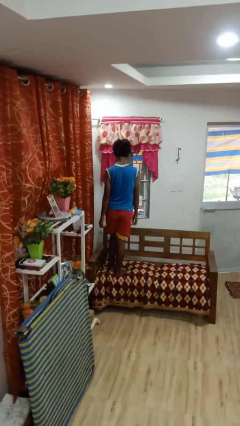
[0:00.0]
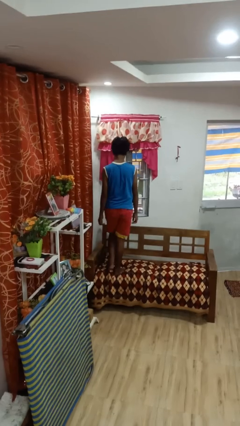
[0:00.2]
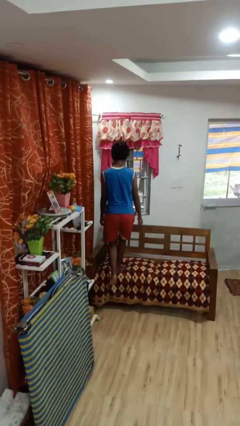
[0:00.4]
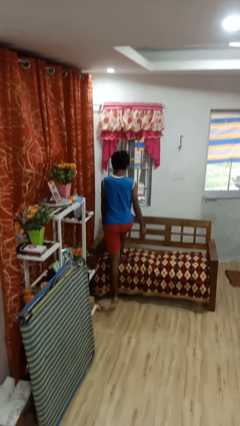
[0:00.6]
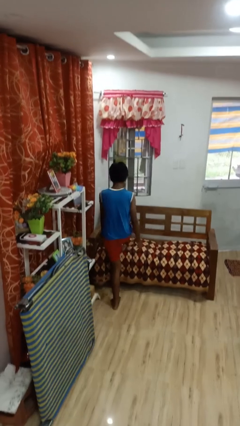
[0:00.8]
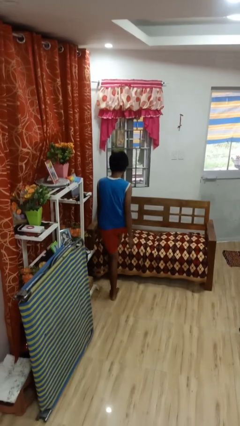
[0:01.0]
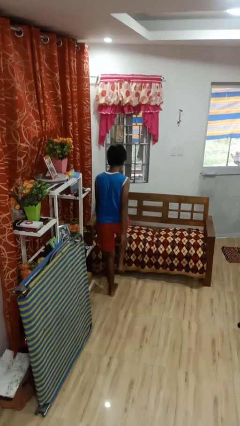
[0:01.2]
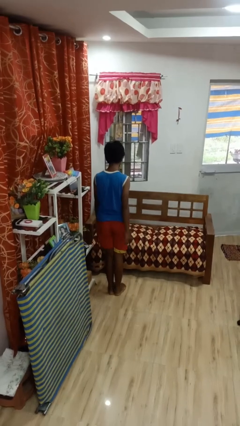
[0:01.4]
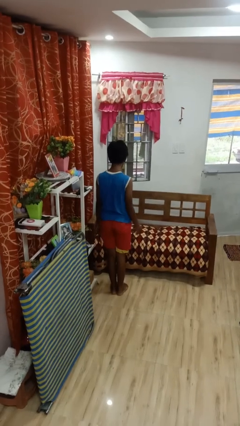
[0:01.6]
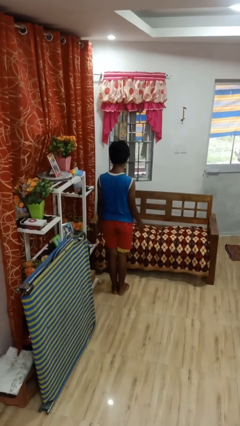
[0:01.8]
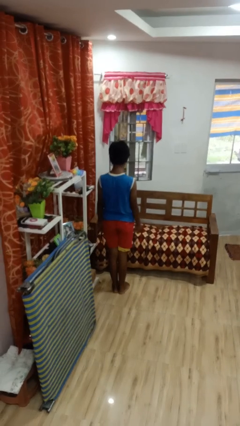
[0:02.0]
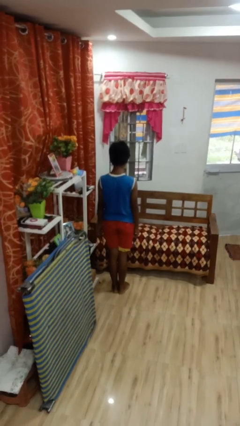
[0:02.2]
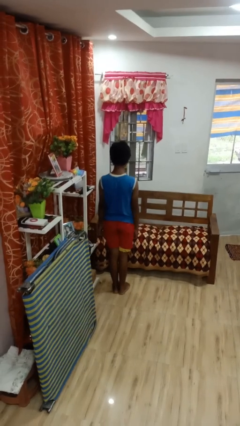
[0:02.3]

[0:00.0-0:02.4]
person climbs off couch

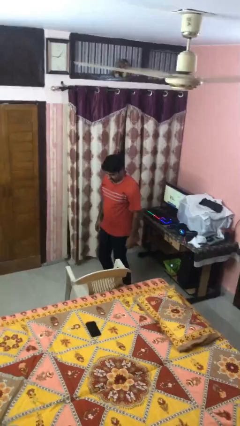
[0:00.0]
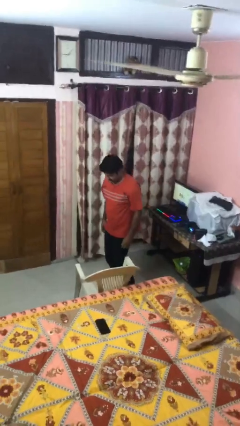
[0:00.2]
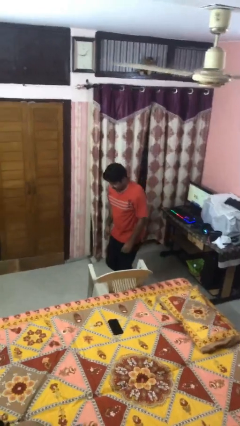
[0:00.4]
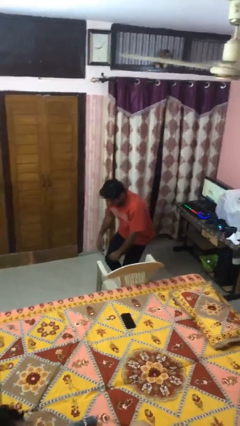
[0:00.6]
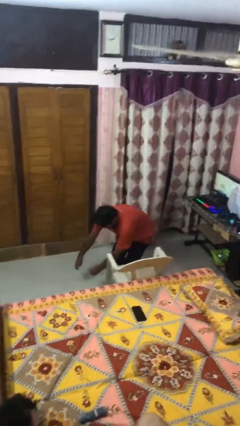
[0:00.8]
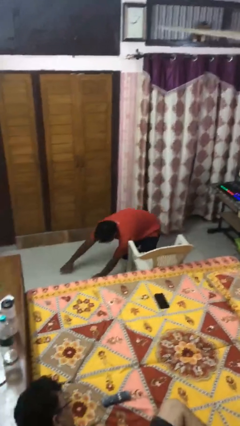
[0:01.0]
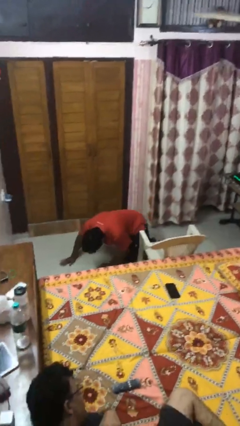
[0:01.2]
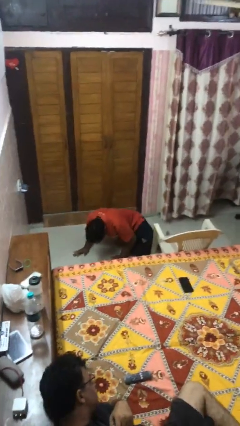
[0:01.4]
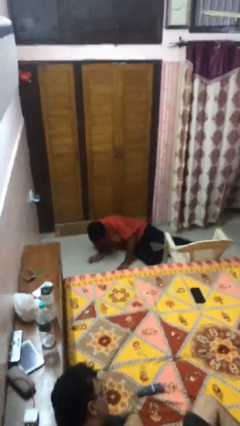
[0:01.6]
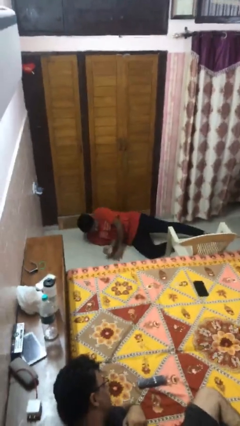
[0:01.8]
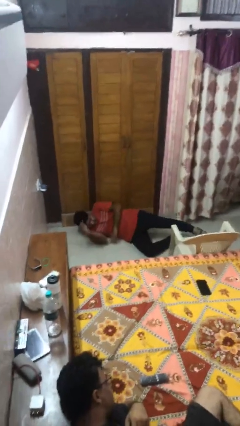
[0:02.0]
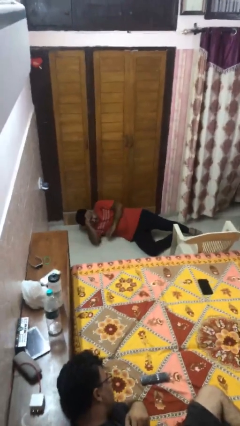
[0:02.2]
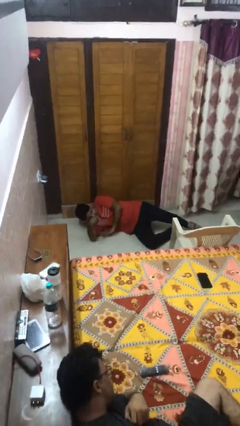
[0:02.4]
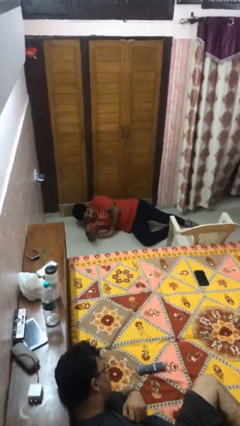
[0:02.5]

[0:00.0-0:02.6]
person trips on object on floor

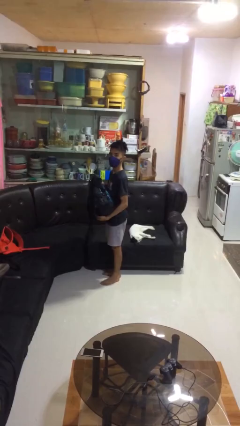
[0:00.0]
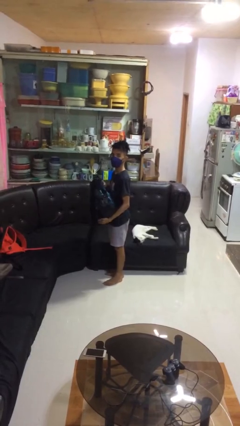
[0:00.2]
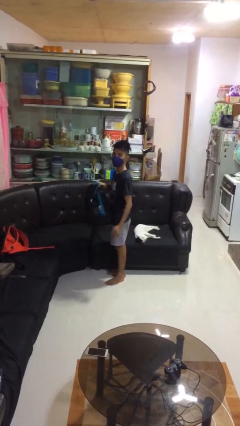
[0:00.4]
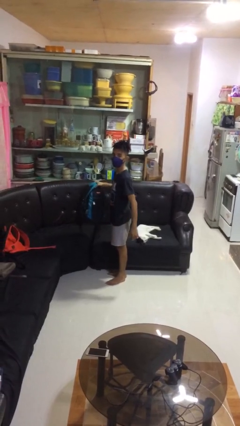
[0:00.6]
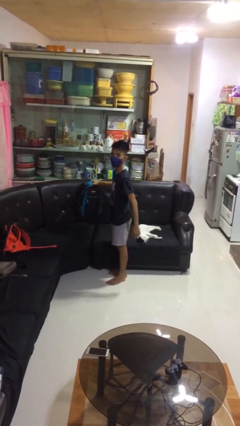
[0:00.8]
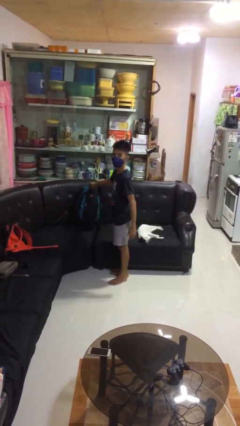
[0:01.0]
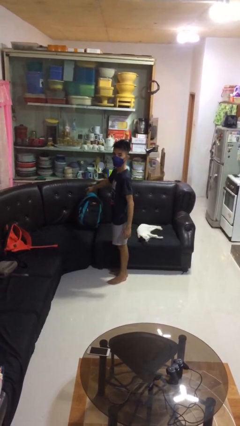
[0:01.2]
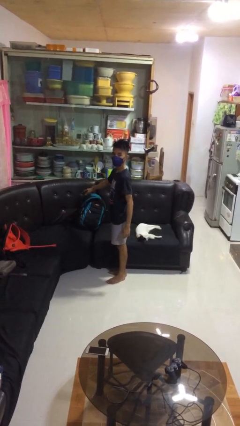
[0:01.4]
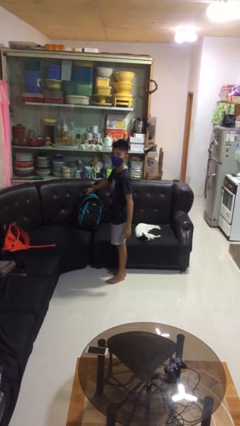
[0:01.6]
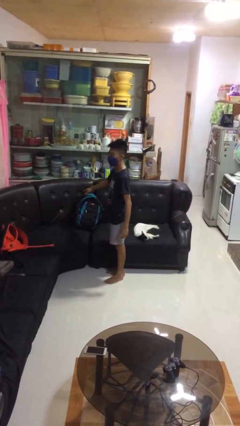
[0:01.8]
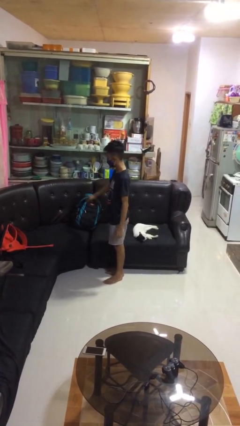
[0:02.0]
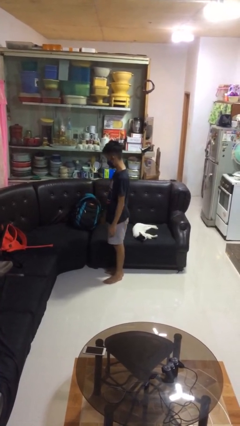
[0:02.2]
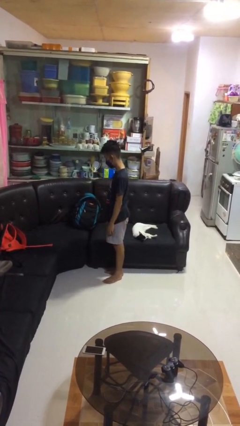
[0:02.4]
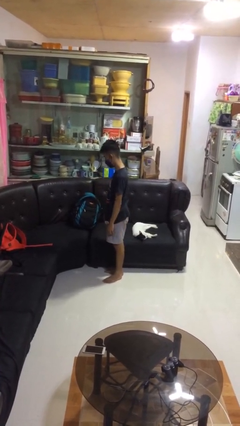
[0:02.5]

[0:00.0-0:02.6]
person puts down object on couch

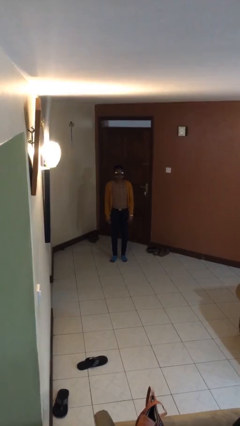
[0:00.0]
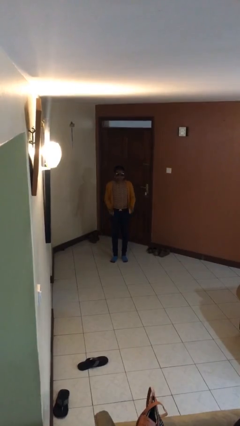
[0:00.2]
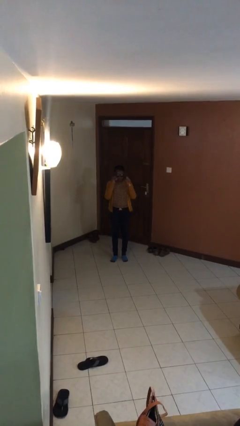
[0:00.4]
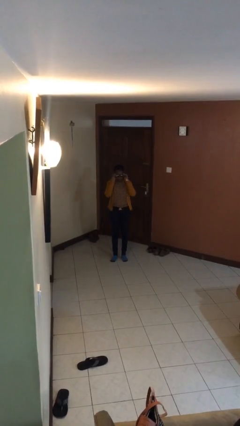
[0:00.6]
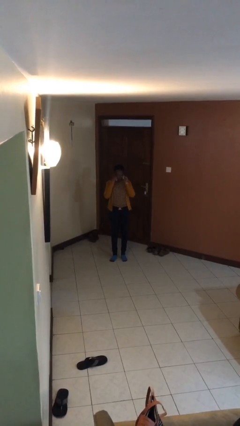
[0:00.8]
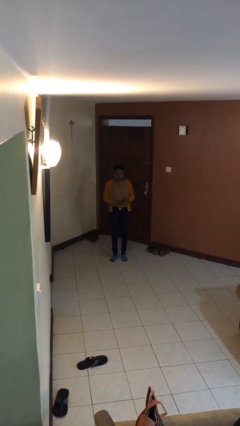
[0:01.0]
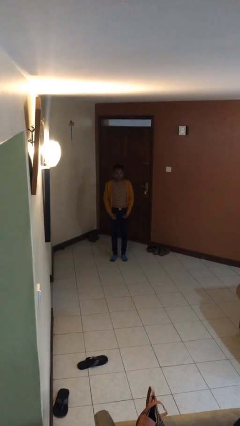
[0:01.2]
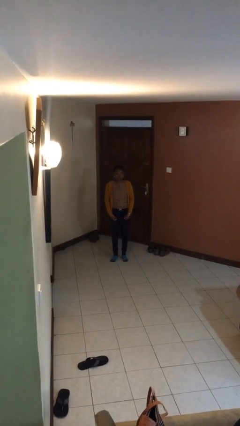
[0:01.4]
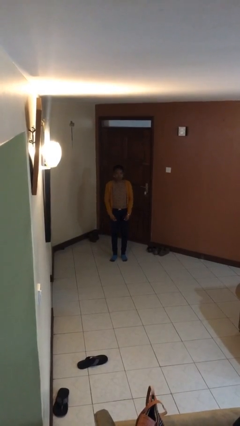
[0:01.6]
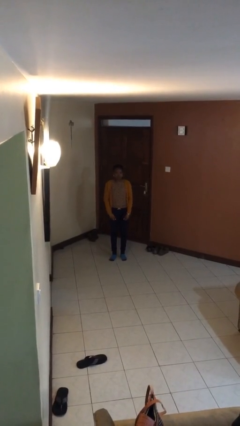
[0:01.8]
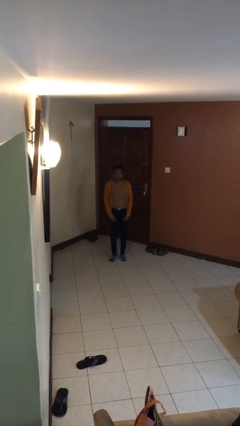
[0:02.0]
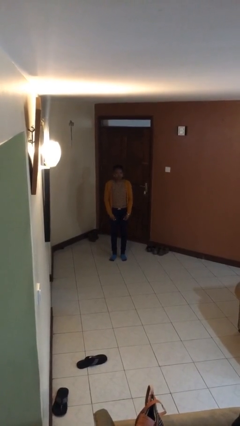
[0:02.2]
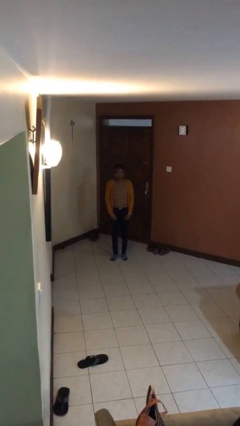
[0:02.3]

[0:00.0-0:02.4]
person takes off sunglasses

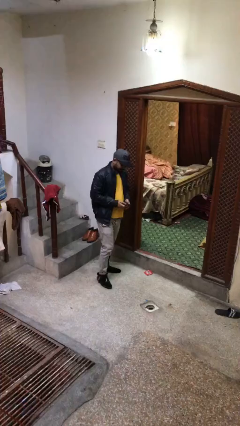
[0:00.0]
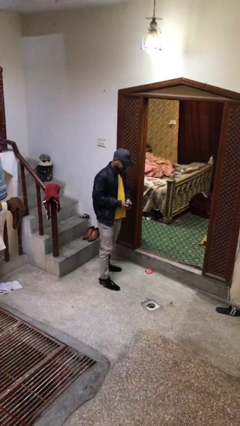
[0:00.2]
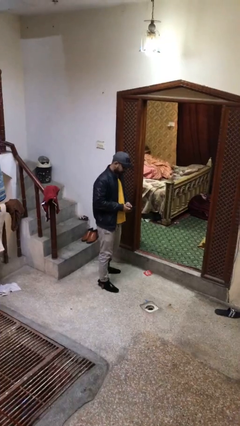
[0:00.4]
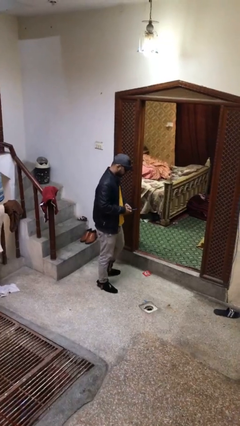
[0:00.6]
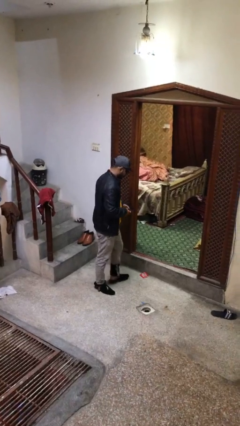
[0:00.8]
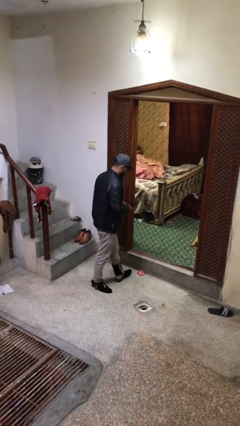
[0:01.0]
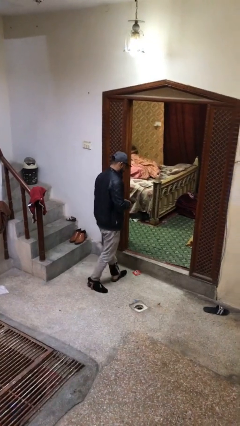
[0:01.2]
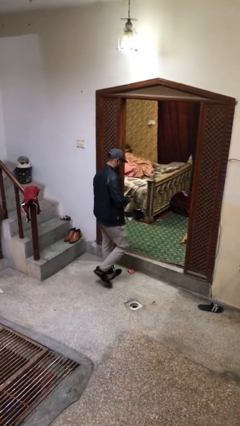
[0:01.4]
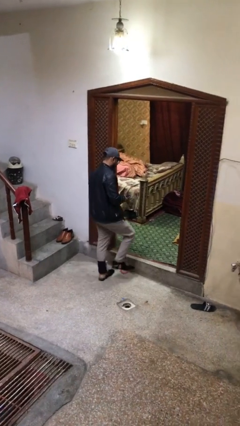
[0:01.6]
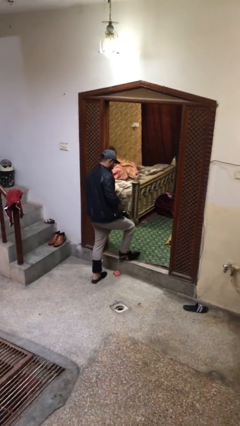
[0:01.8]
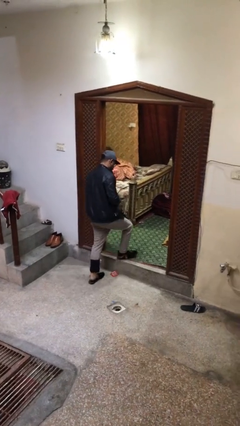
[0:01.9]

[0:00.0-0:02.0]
person exits scene through structure

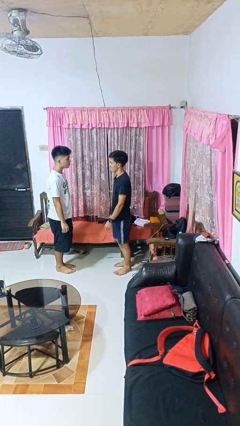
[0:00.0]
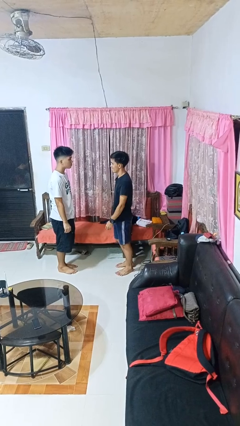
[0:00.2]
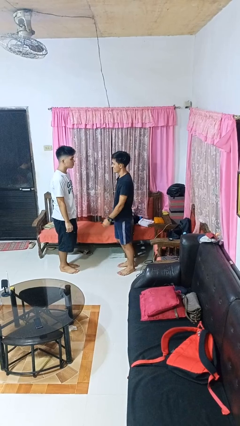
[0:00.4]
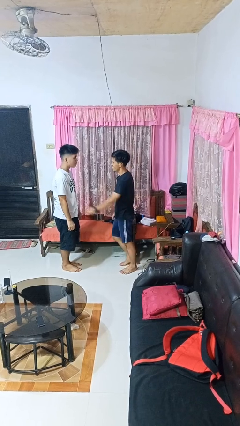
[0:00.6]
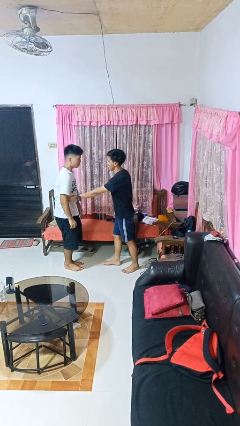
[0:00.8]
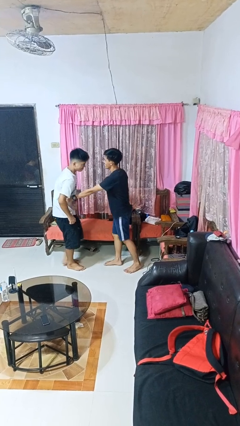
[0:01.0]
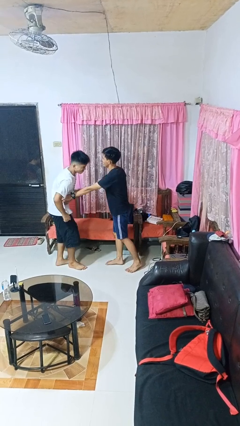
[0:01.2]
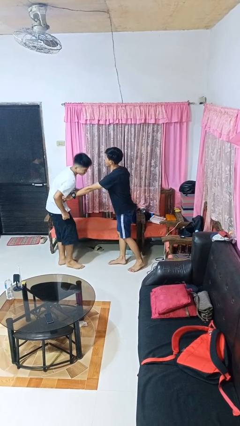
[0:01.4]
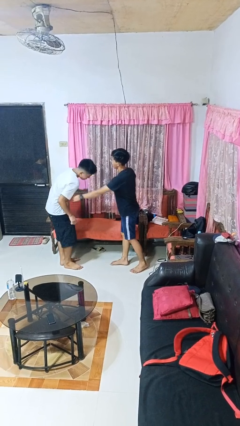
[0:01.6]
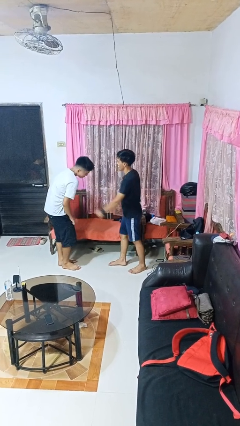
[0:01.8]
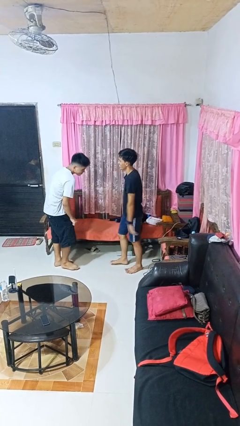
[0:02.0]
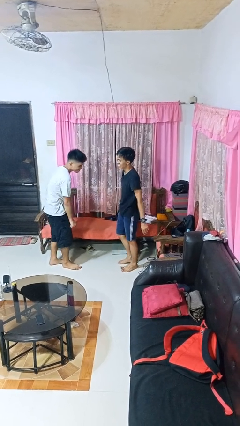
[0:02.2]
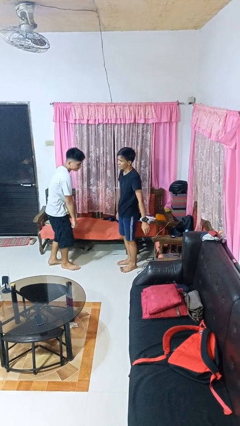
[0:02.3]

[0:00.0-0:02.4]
person tickles person

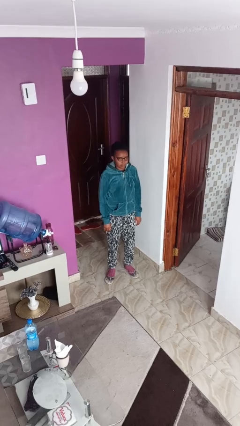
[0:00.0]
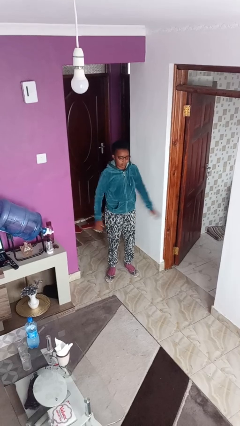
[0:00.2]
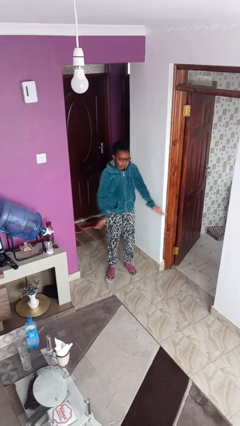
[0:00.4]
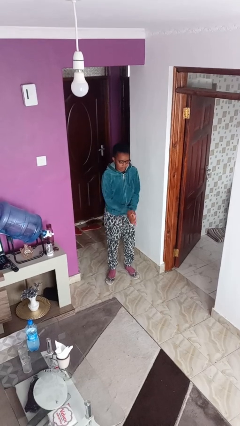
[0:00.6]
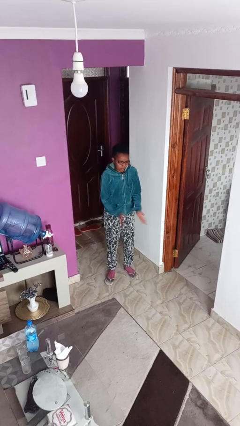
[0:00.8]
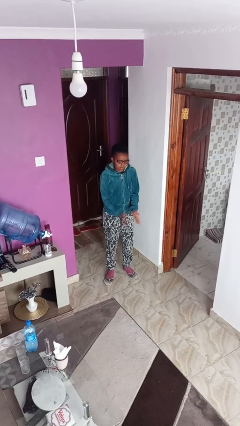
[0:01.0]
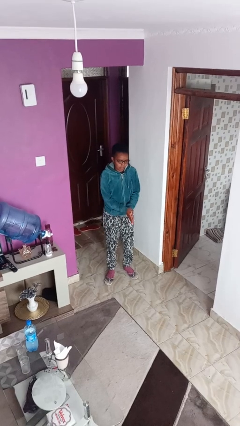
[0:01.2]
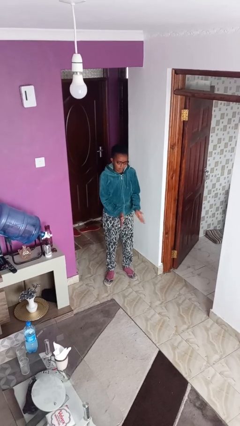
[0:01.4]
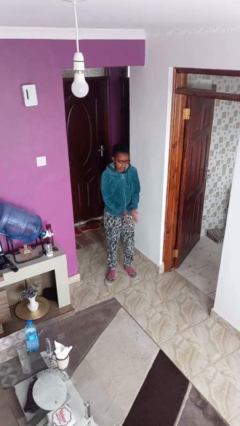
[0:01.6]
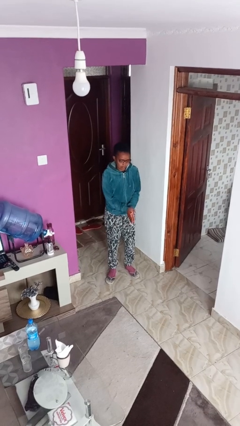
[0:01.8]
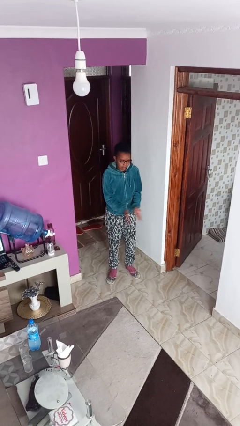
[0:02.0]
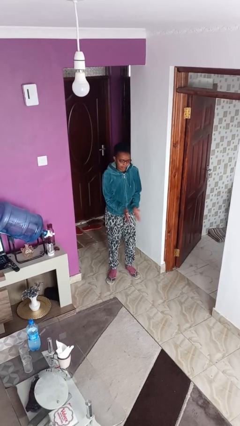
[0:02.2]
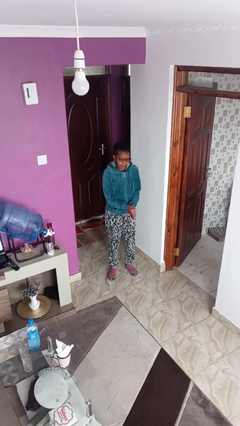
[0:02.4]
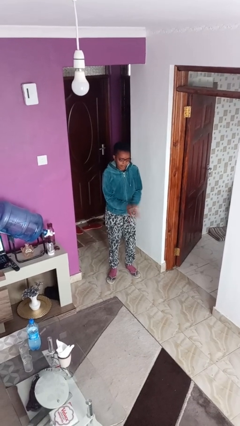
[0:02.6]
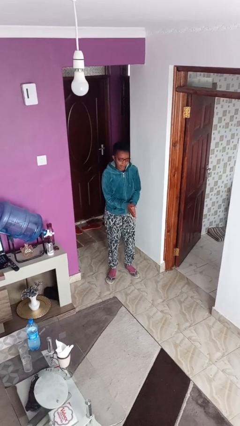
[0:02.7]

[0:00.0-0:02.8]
person claps hands
